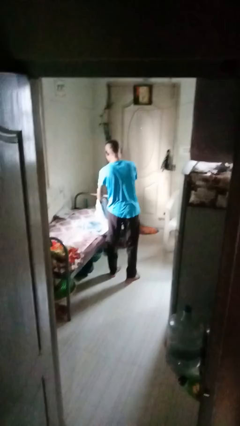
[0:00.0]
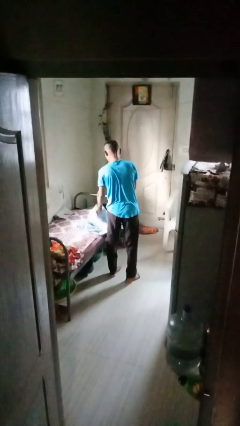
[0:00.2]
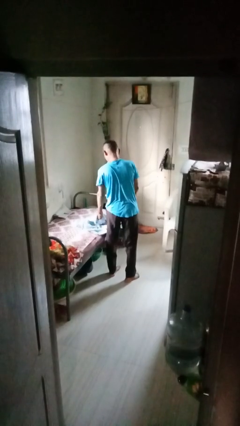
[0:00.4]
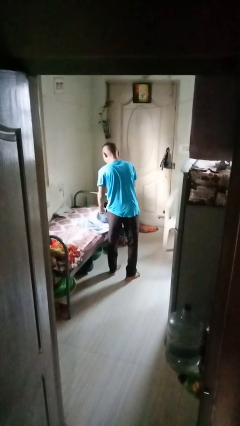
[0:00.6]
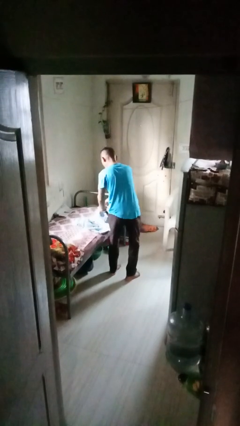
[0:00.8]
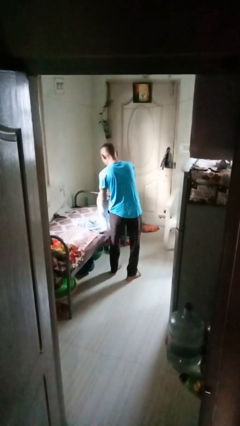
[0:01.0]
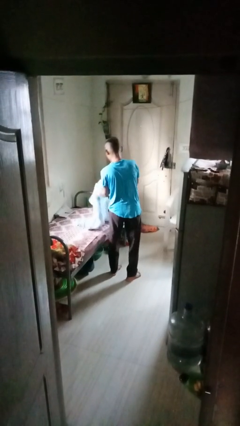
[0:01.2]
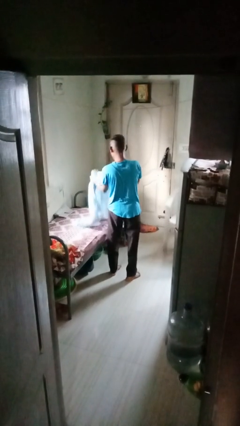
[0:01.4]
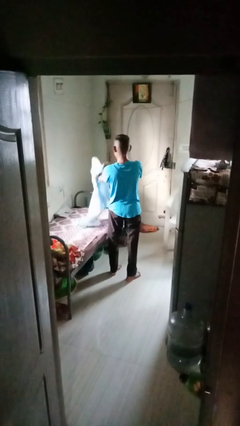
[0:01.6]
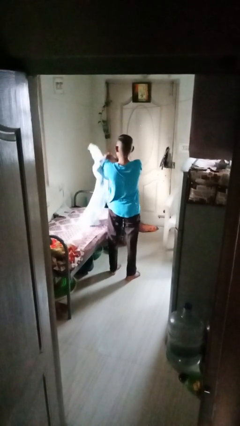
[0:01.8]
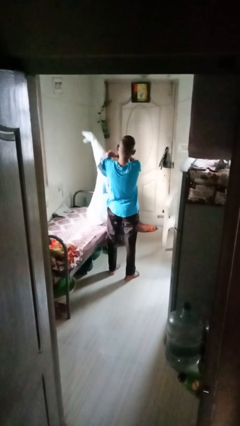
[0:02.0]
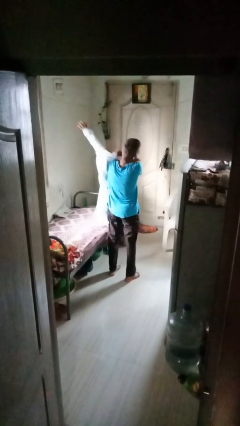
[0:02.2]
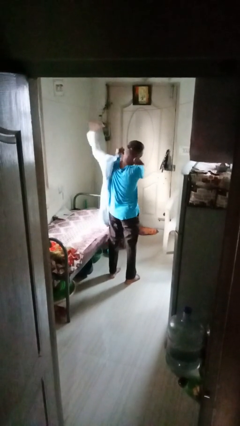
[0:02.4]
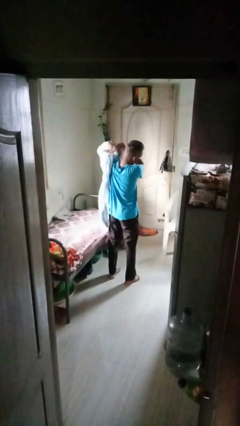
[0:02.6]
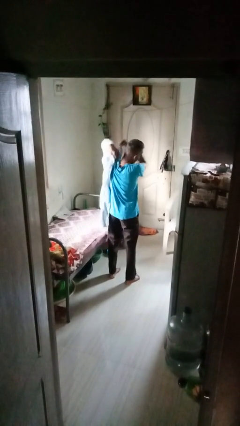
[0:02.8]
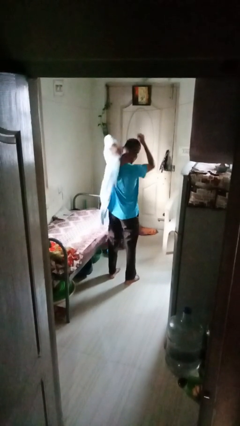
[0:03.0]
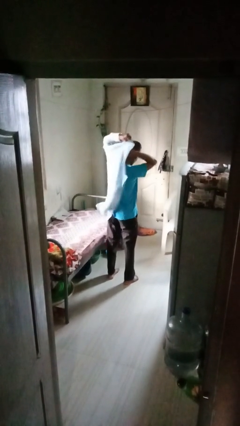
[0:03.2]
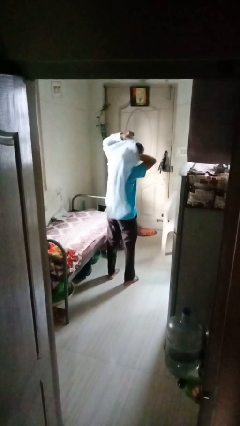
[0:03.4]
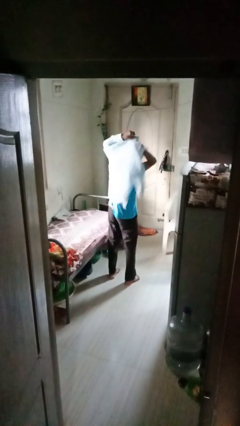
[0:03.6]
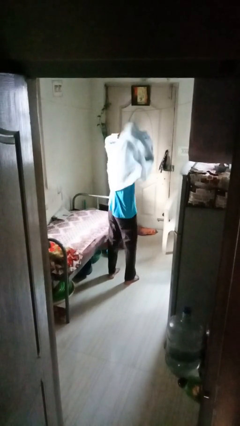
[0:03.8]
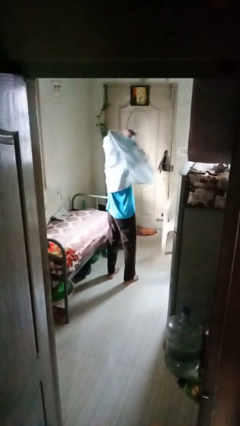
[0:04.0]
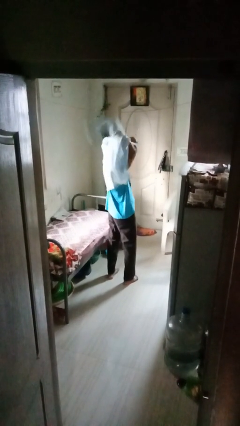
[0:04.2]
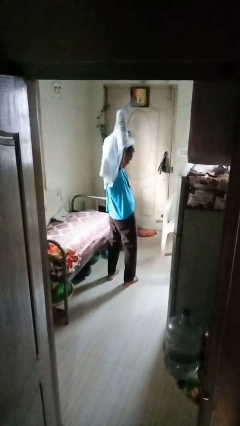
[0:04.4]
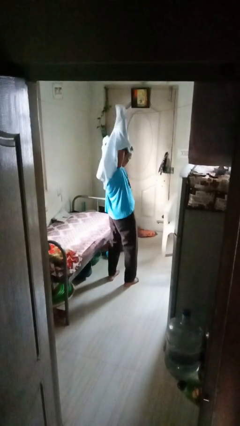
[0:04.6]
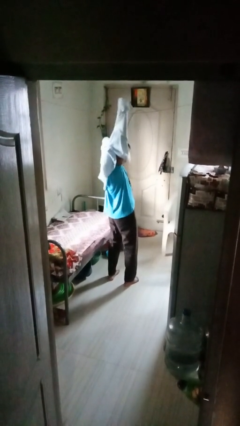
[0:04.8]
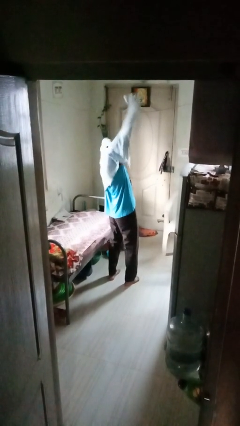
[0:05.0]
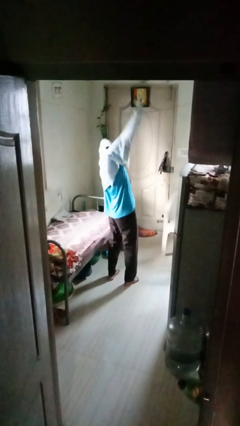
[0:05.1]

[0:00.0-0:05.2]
person puts on shirt

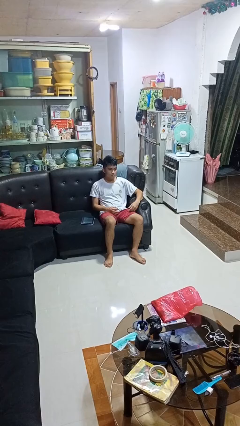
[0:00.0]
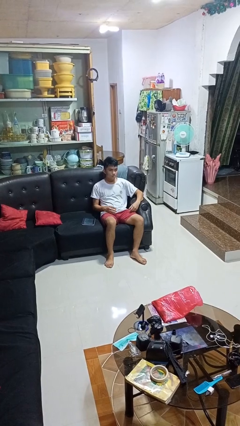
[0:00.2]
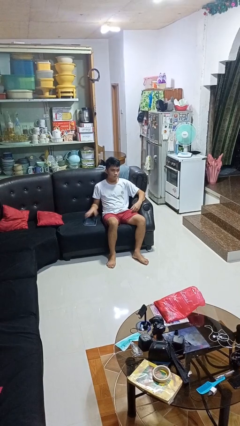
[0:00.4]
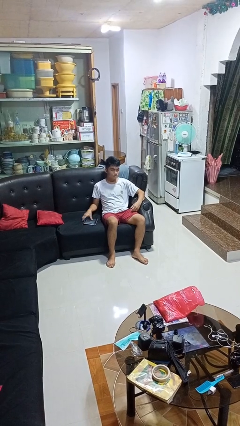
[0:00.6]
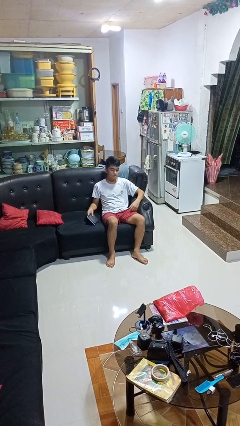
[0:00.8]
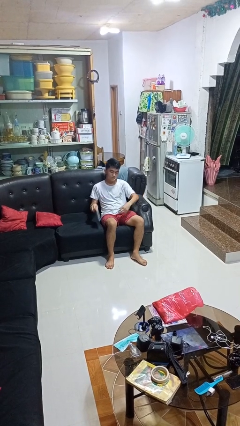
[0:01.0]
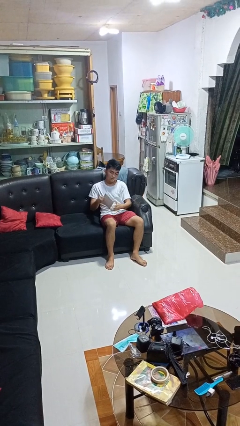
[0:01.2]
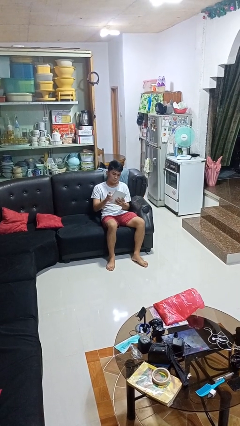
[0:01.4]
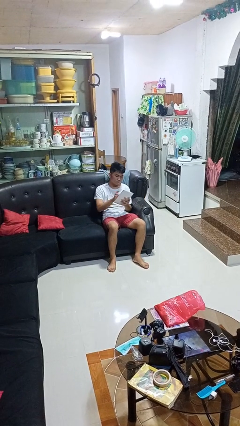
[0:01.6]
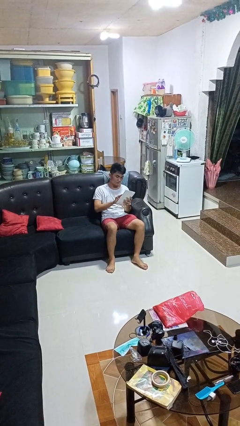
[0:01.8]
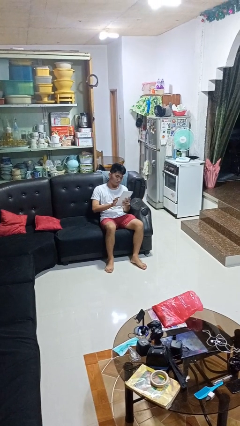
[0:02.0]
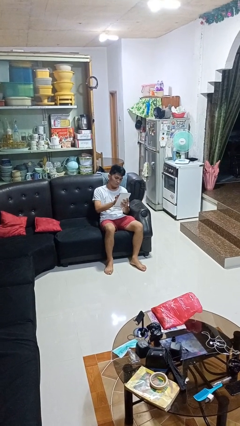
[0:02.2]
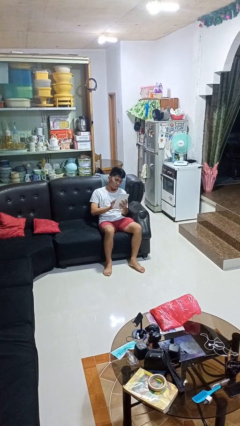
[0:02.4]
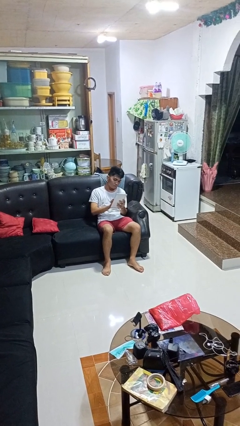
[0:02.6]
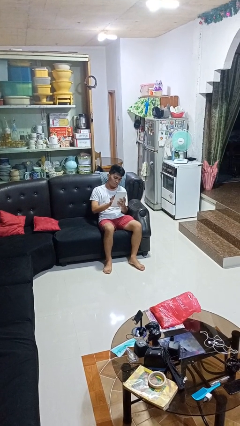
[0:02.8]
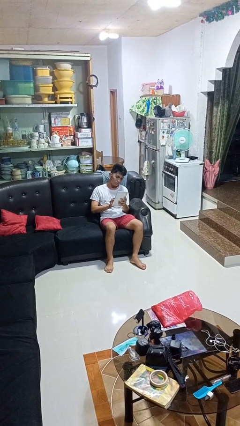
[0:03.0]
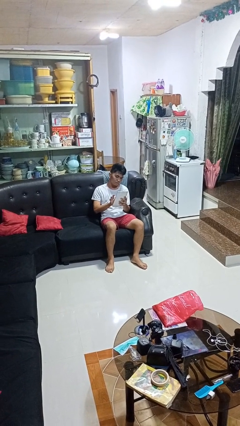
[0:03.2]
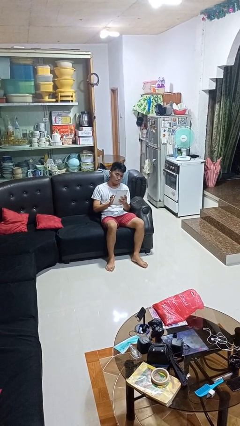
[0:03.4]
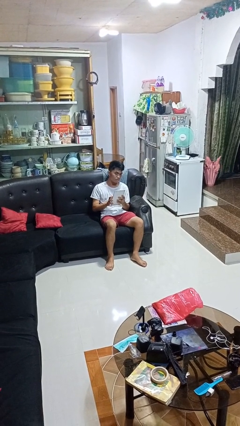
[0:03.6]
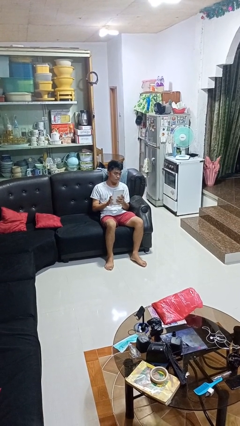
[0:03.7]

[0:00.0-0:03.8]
person interacts with tablet

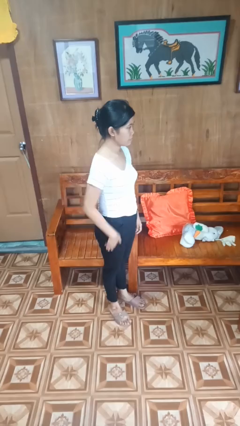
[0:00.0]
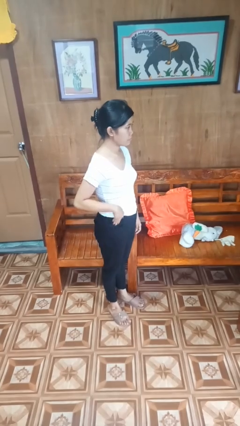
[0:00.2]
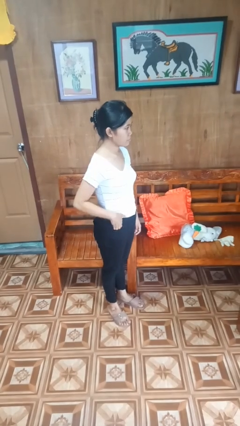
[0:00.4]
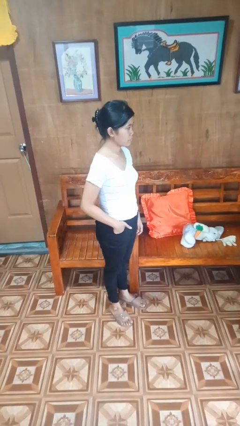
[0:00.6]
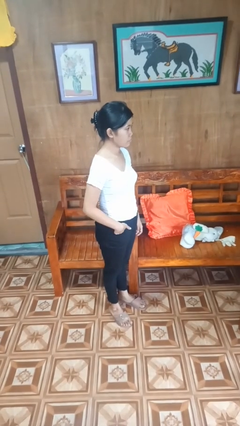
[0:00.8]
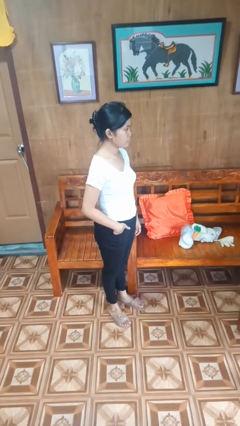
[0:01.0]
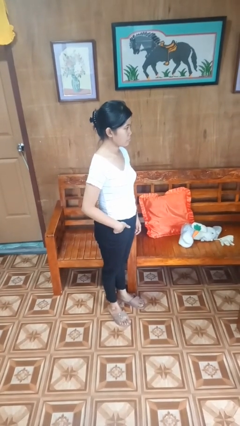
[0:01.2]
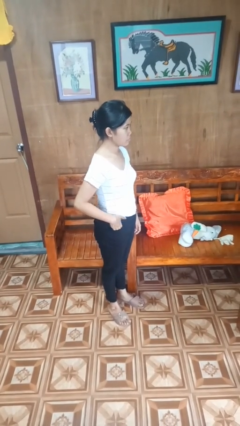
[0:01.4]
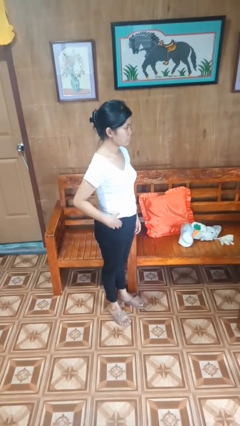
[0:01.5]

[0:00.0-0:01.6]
person puts hands in back pockets

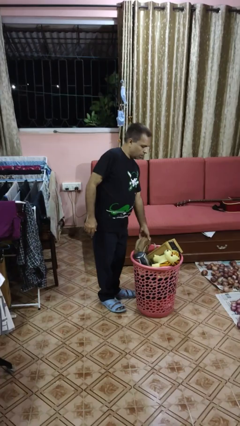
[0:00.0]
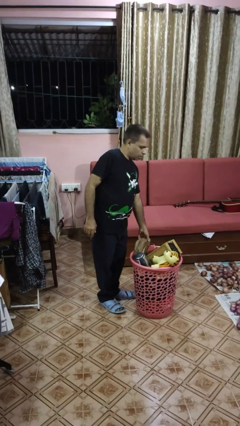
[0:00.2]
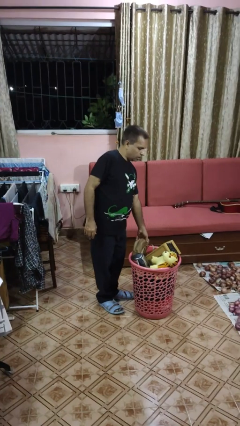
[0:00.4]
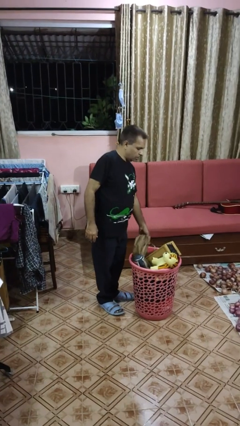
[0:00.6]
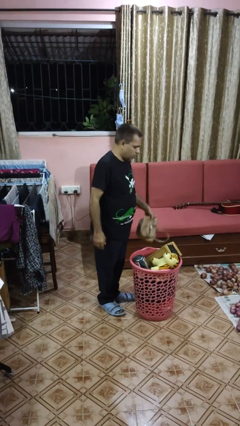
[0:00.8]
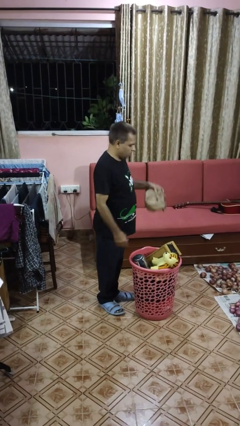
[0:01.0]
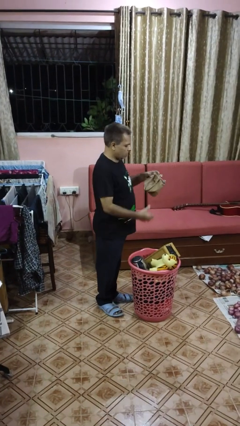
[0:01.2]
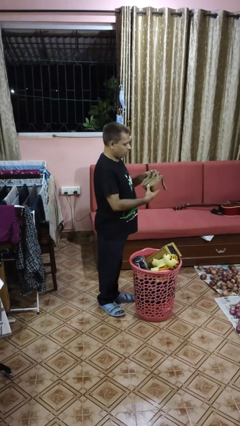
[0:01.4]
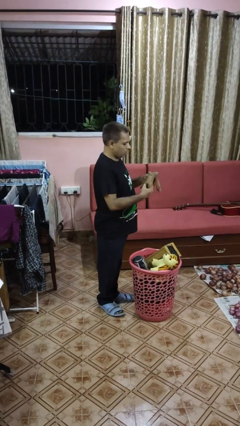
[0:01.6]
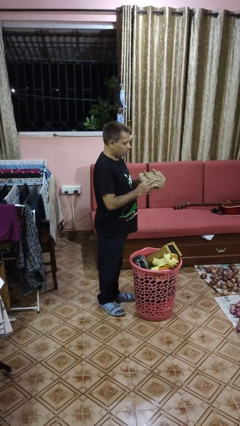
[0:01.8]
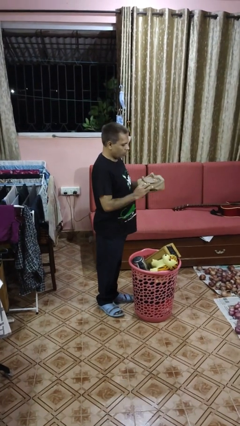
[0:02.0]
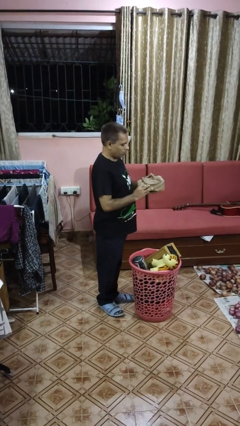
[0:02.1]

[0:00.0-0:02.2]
person takes object from basket

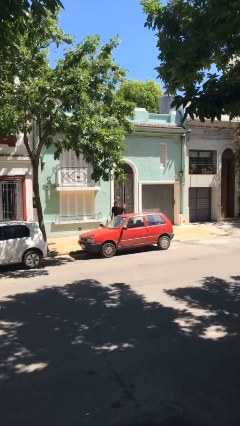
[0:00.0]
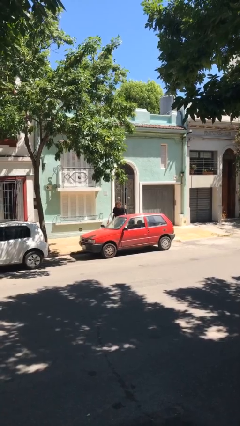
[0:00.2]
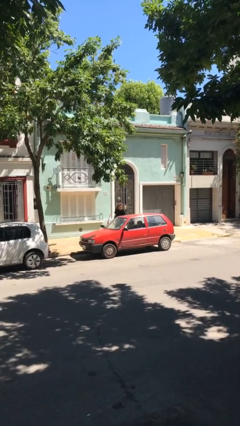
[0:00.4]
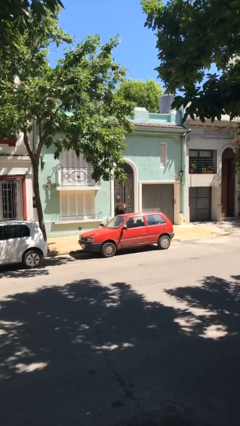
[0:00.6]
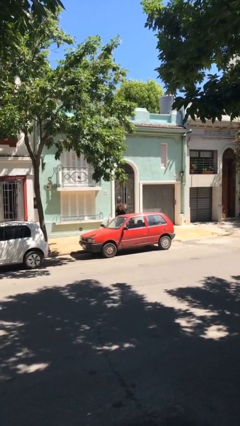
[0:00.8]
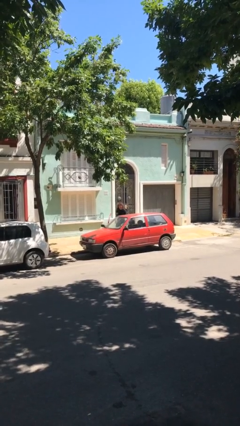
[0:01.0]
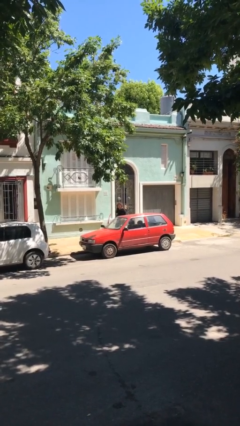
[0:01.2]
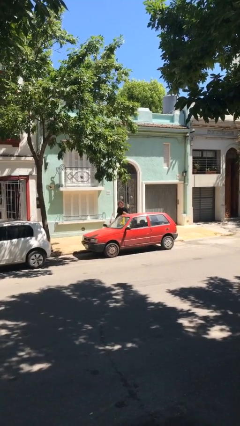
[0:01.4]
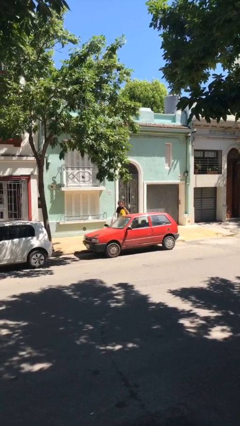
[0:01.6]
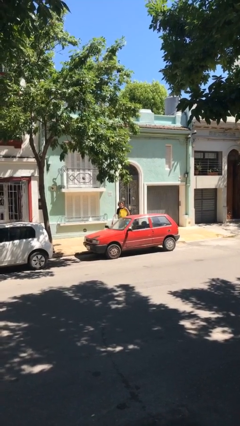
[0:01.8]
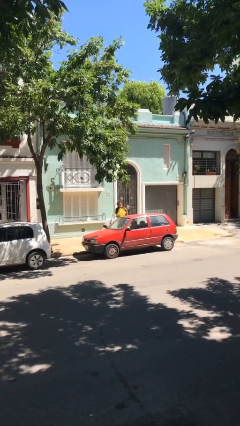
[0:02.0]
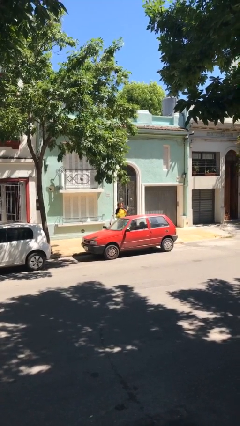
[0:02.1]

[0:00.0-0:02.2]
person unloads car

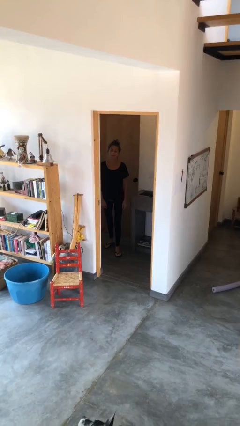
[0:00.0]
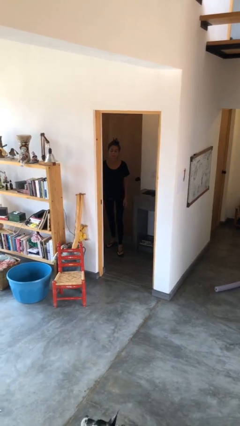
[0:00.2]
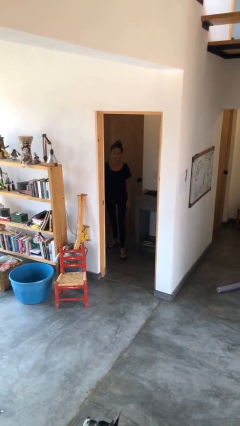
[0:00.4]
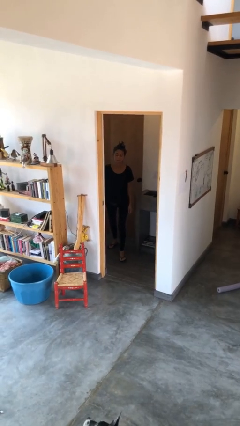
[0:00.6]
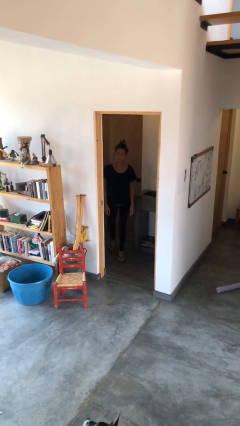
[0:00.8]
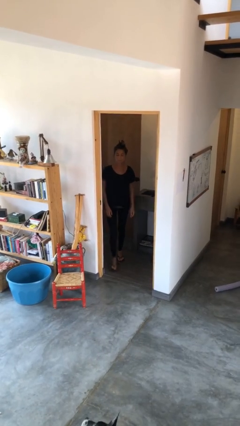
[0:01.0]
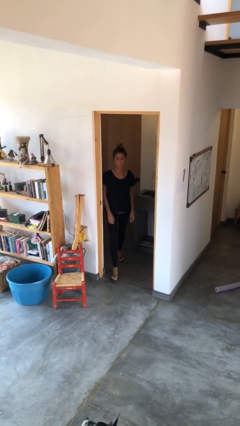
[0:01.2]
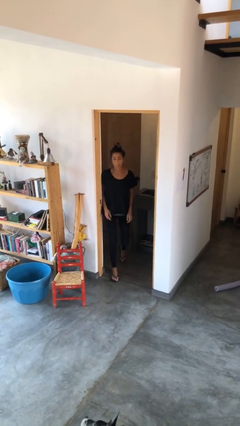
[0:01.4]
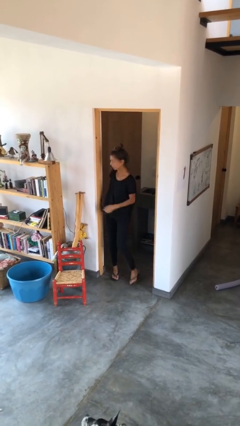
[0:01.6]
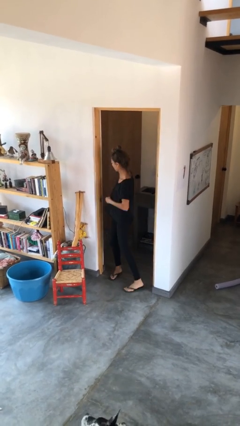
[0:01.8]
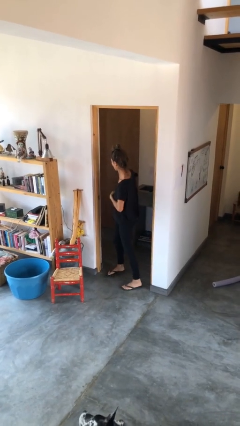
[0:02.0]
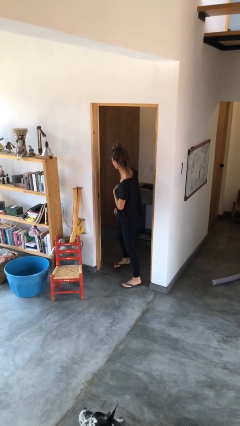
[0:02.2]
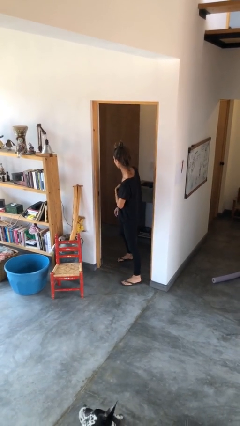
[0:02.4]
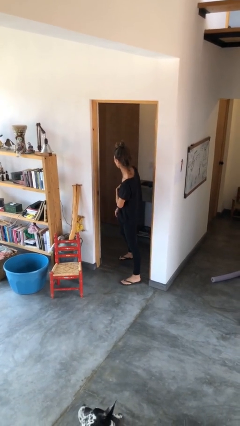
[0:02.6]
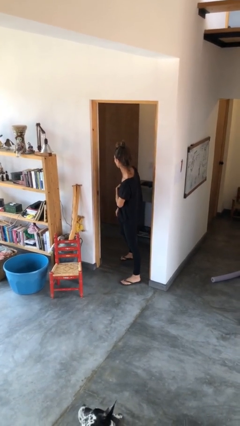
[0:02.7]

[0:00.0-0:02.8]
person bumps into wall

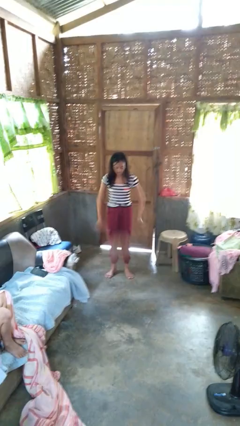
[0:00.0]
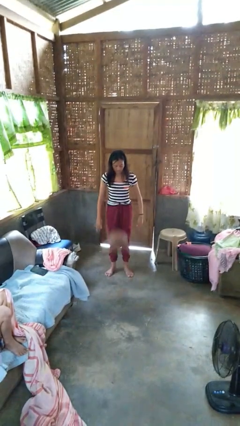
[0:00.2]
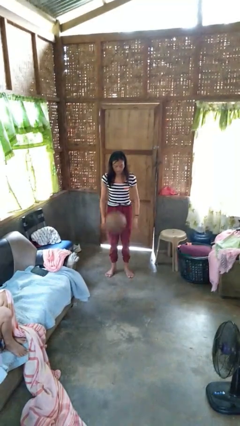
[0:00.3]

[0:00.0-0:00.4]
person bounces ball on floor
